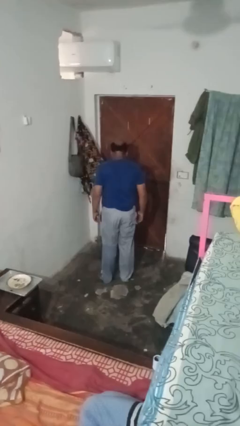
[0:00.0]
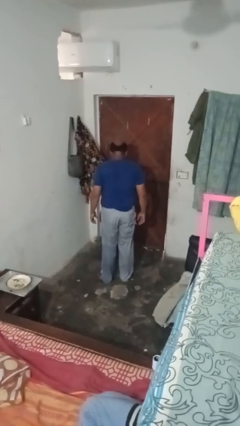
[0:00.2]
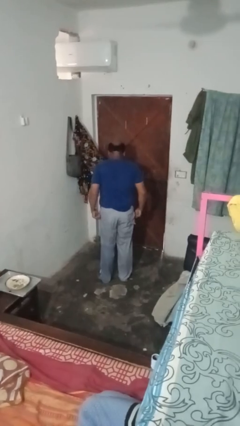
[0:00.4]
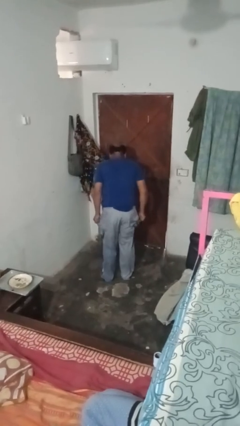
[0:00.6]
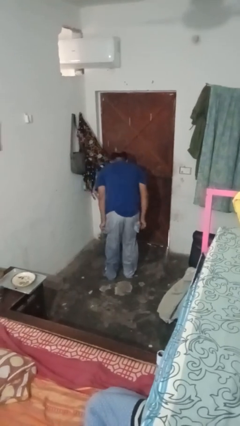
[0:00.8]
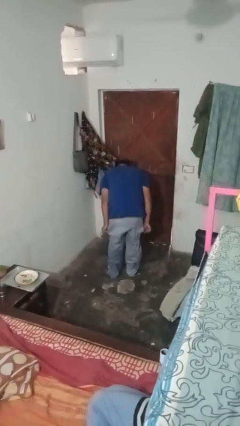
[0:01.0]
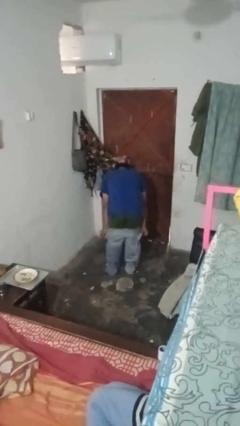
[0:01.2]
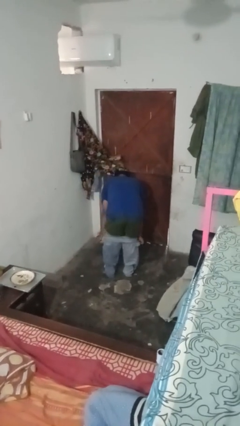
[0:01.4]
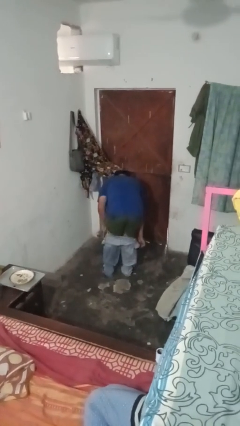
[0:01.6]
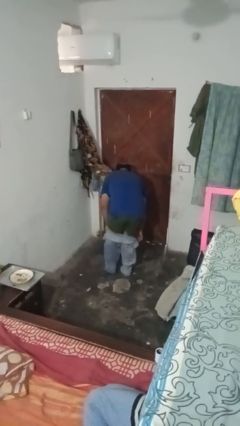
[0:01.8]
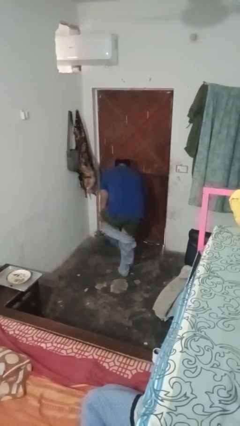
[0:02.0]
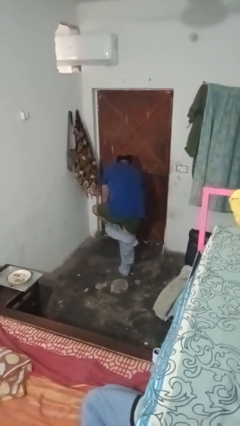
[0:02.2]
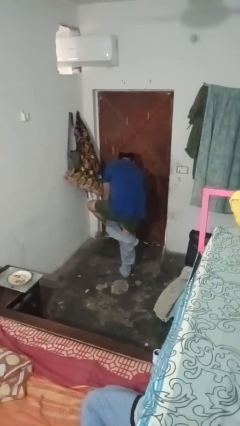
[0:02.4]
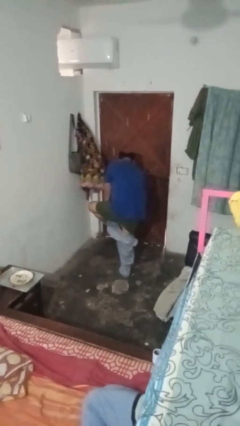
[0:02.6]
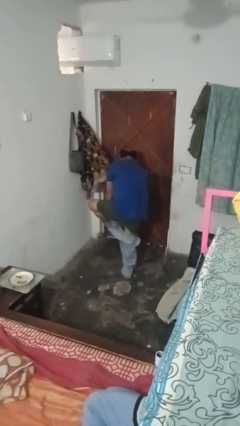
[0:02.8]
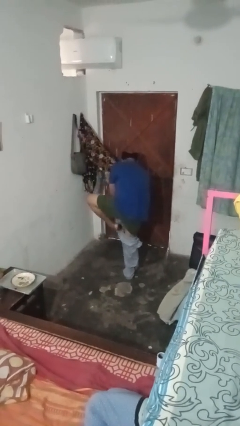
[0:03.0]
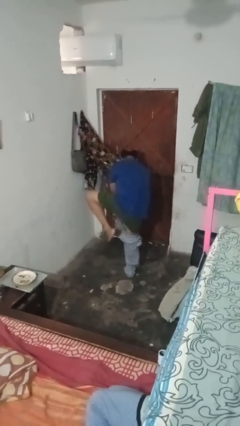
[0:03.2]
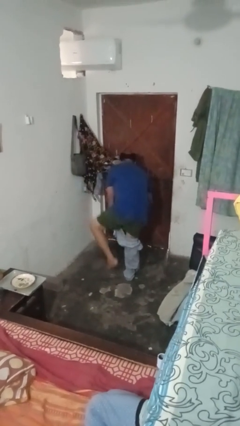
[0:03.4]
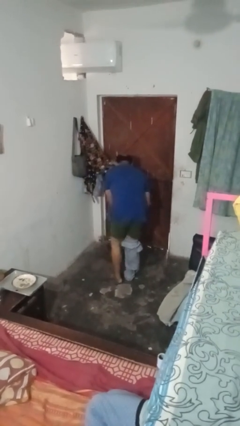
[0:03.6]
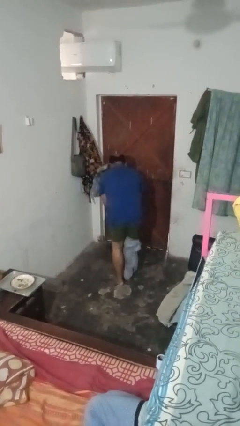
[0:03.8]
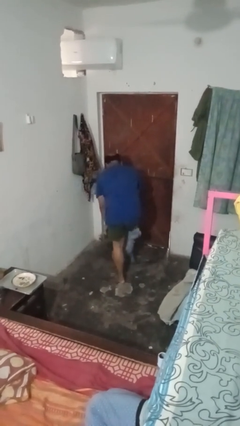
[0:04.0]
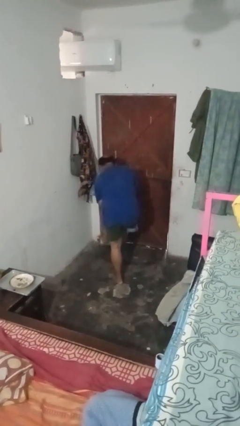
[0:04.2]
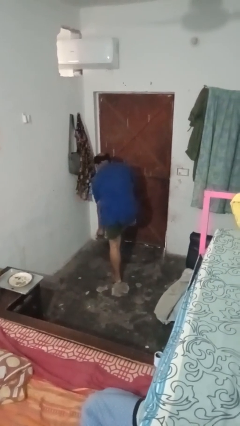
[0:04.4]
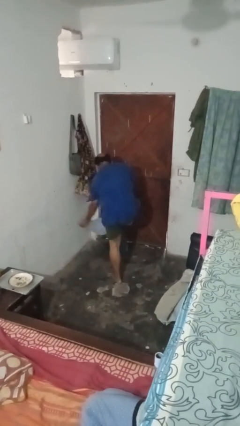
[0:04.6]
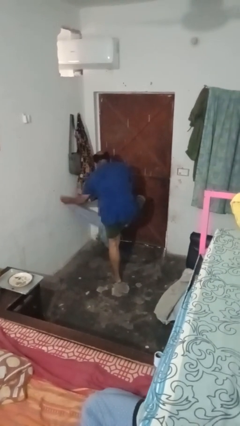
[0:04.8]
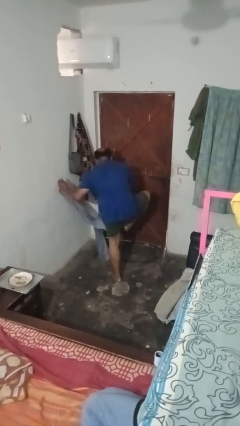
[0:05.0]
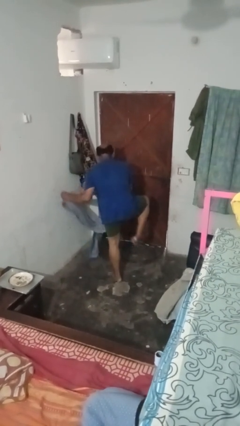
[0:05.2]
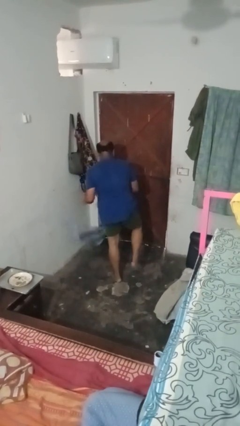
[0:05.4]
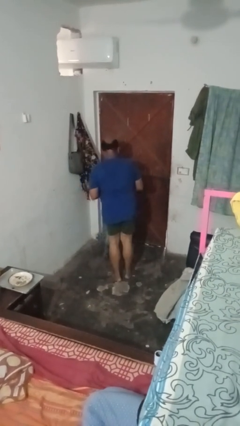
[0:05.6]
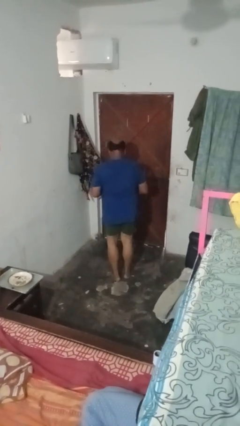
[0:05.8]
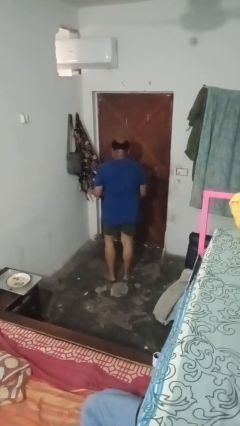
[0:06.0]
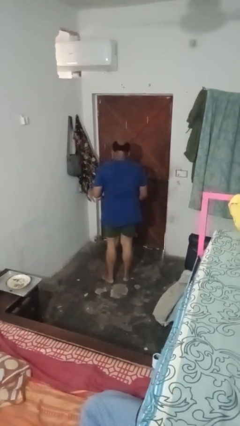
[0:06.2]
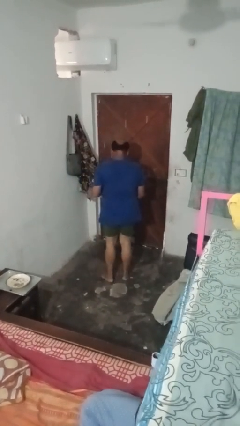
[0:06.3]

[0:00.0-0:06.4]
person takes off pants

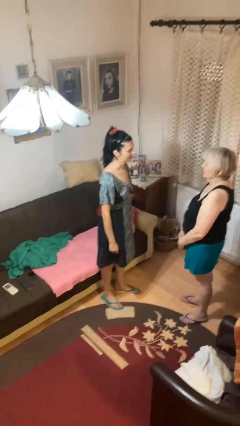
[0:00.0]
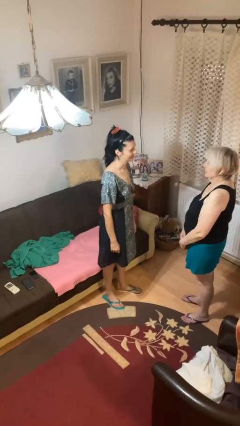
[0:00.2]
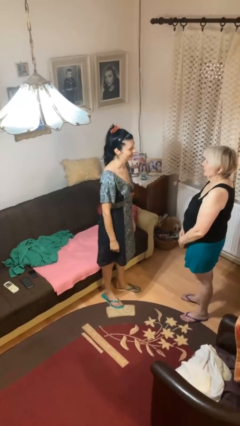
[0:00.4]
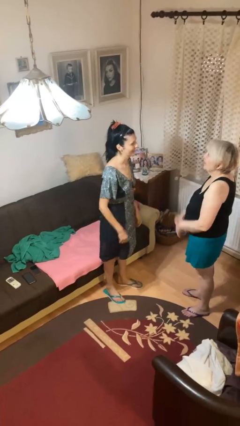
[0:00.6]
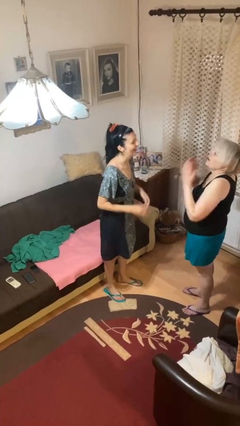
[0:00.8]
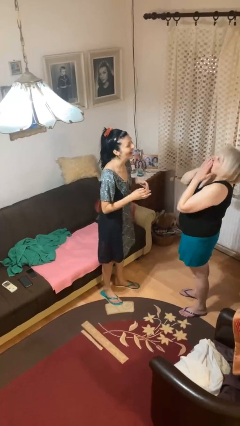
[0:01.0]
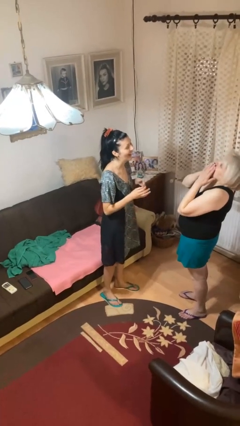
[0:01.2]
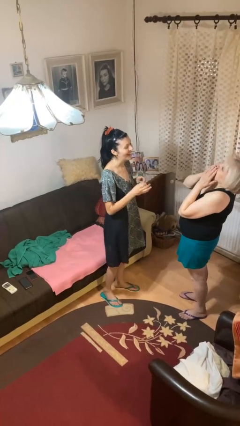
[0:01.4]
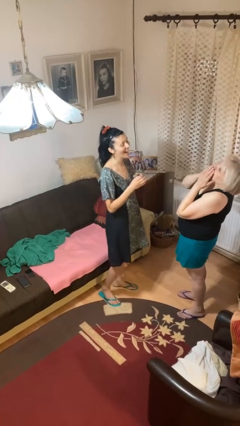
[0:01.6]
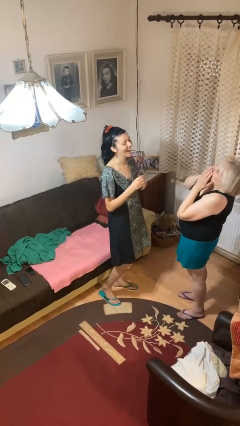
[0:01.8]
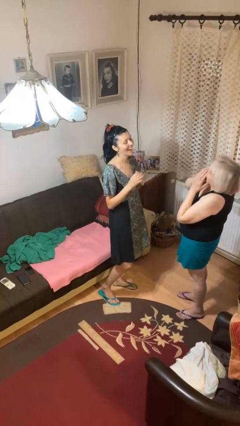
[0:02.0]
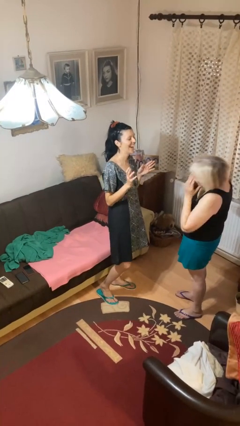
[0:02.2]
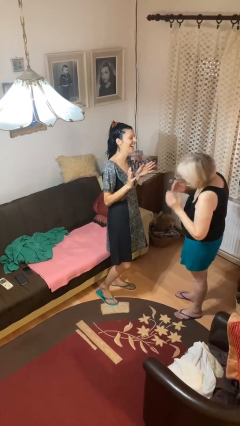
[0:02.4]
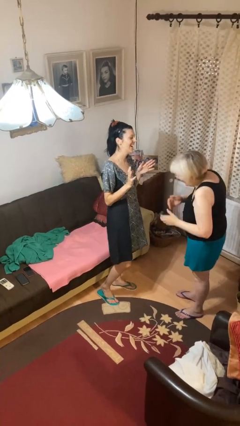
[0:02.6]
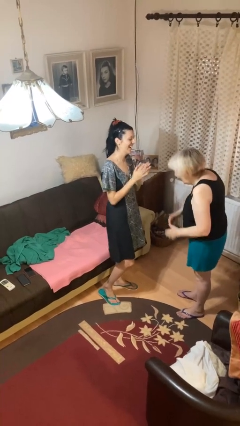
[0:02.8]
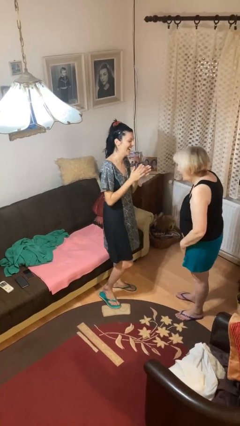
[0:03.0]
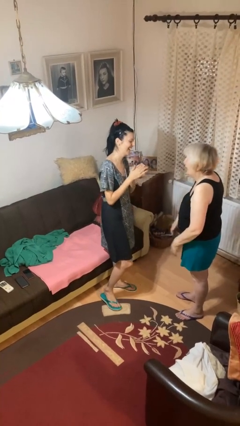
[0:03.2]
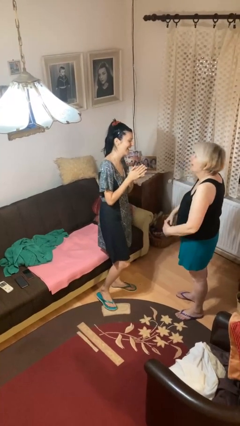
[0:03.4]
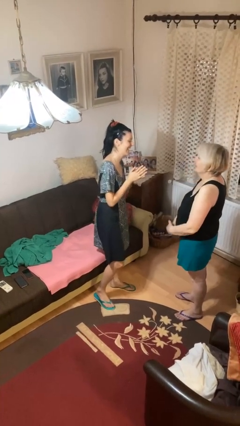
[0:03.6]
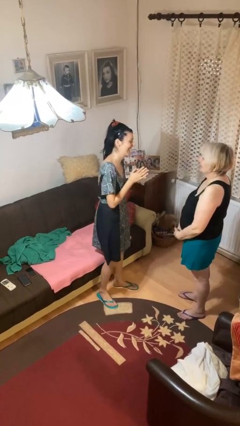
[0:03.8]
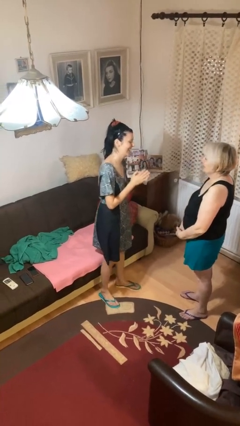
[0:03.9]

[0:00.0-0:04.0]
person laughs with person

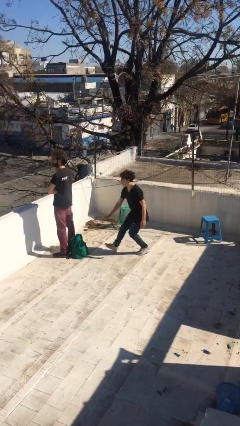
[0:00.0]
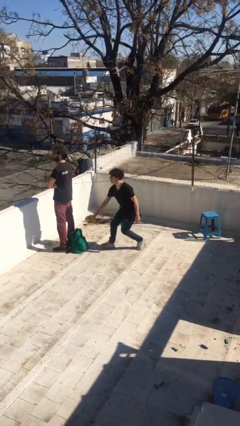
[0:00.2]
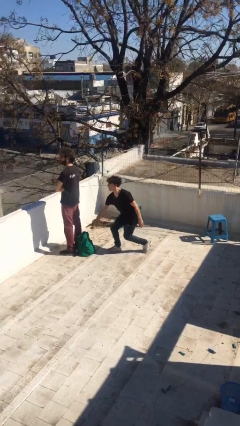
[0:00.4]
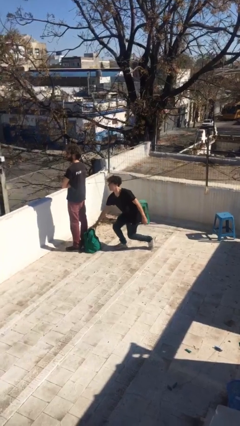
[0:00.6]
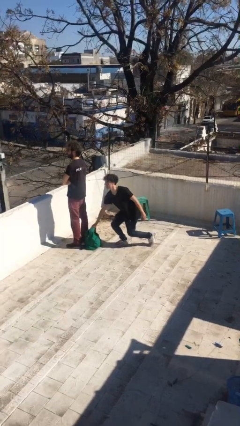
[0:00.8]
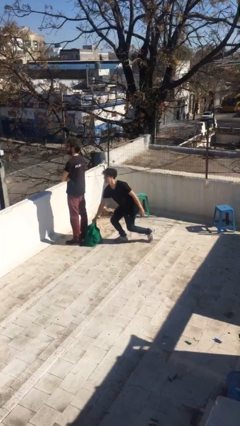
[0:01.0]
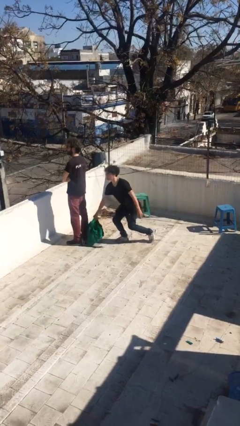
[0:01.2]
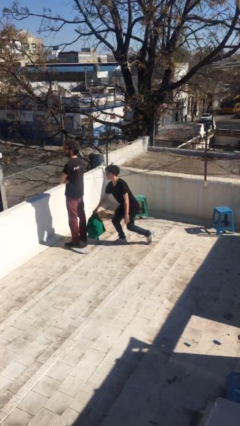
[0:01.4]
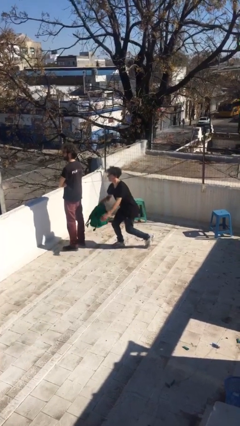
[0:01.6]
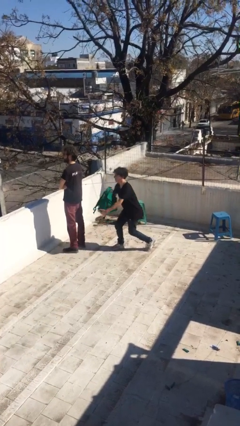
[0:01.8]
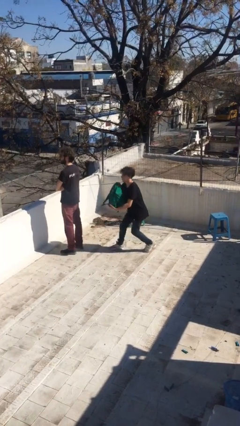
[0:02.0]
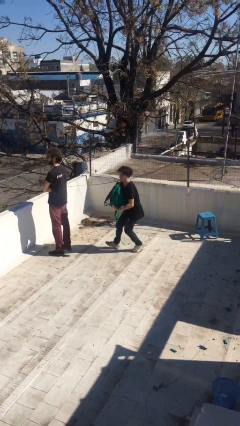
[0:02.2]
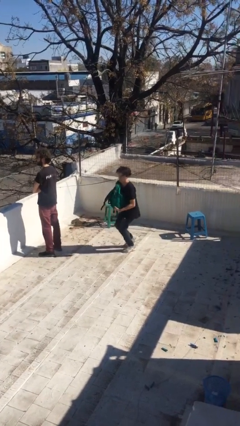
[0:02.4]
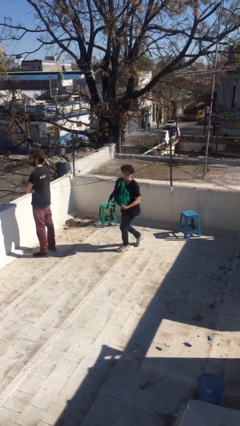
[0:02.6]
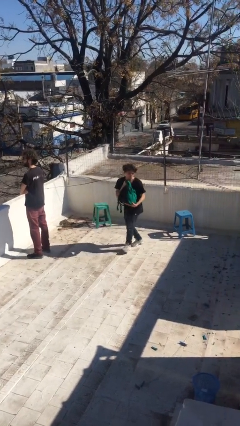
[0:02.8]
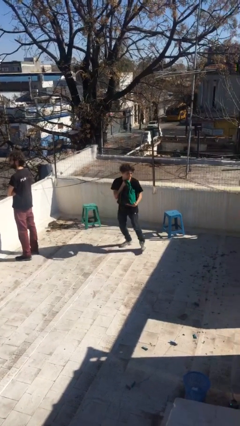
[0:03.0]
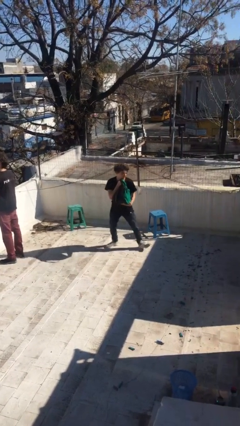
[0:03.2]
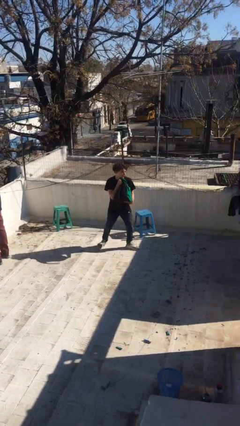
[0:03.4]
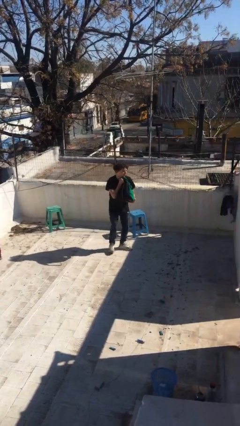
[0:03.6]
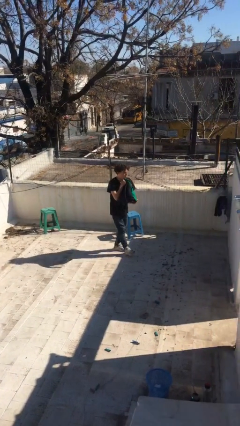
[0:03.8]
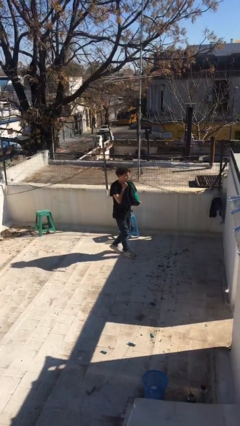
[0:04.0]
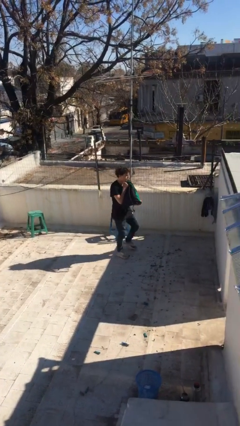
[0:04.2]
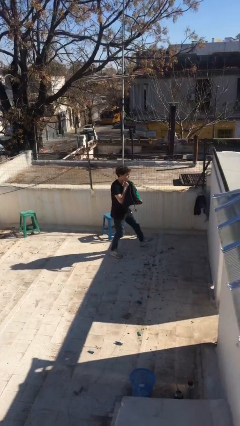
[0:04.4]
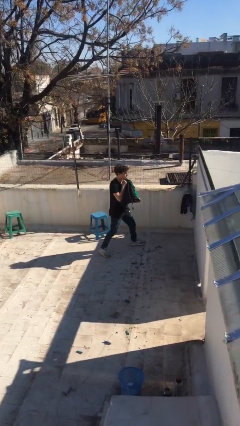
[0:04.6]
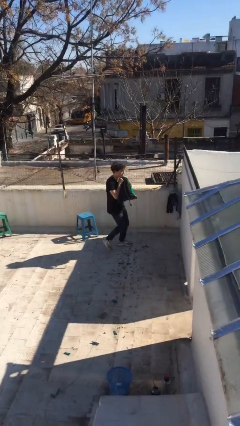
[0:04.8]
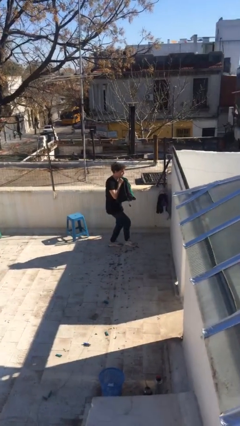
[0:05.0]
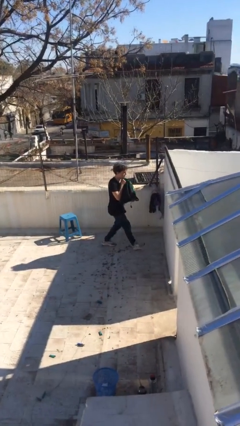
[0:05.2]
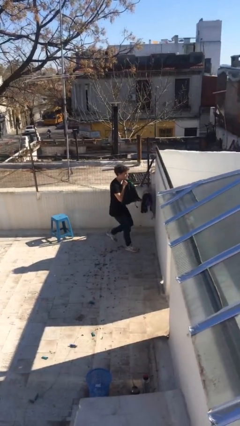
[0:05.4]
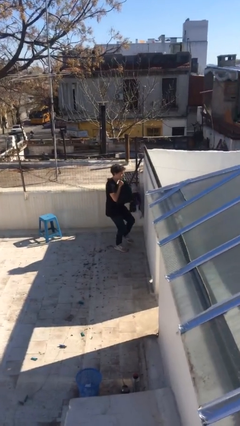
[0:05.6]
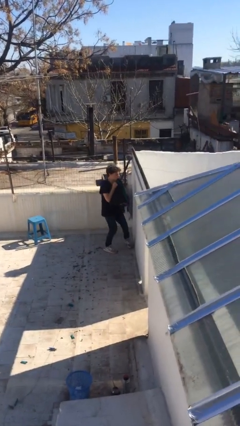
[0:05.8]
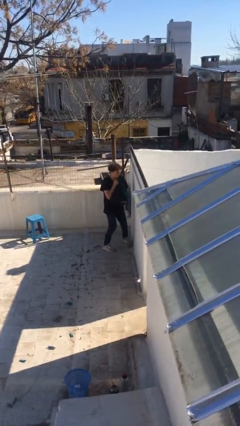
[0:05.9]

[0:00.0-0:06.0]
person steals object from person

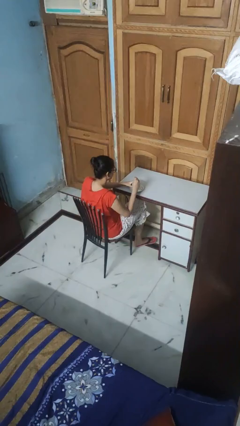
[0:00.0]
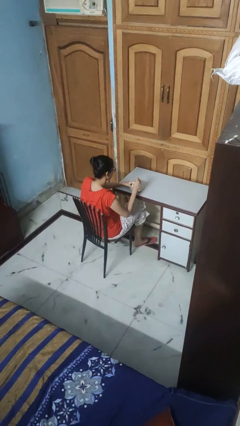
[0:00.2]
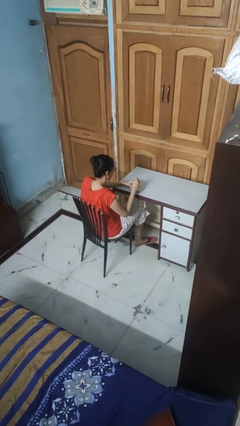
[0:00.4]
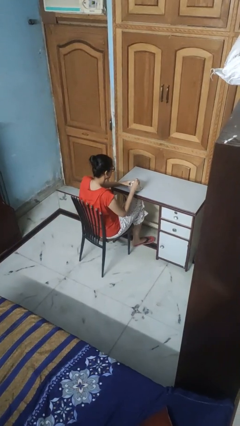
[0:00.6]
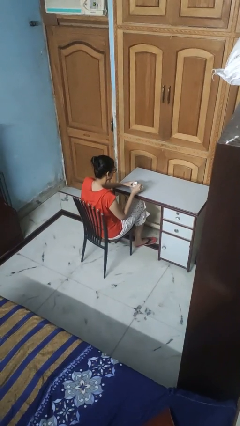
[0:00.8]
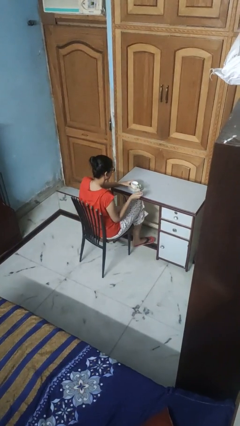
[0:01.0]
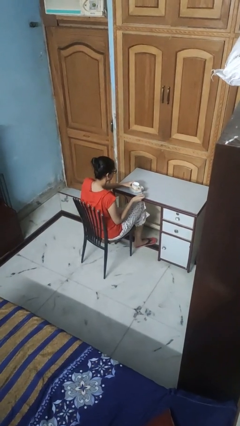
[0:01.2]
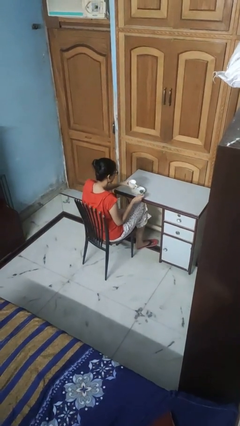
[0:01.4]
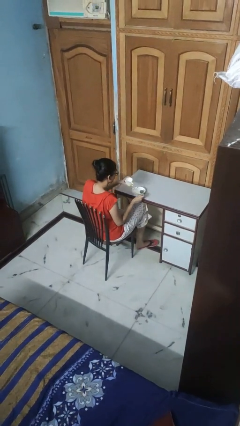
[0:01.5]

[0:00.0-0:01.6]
person stirs mug
